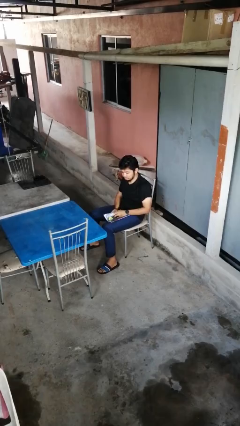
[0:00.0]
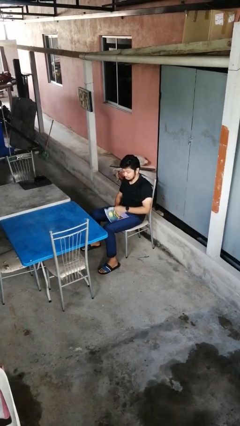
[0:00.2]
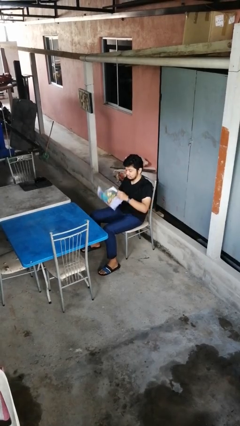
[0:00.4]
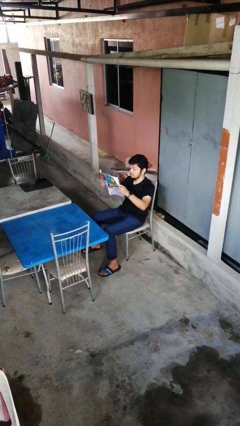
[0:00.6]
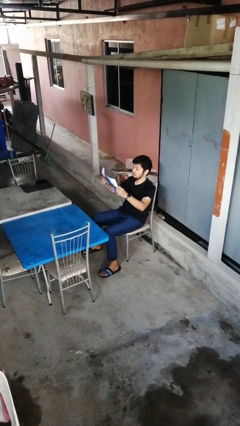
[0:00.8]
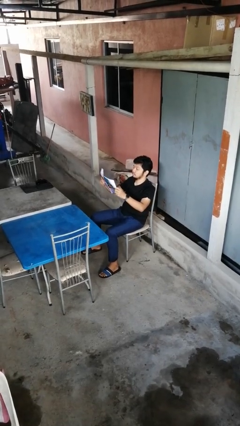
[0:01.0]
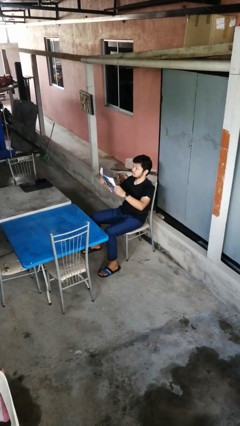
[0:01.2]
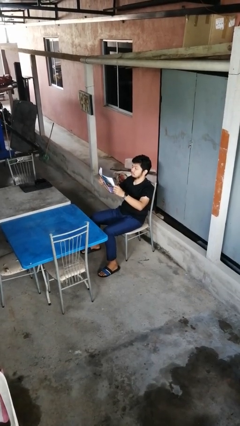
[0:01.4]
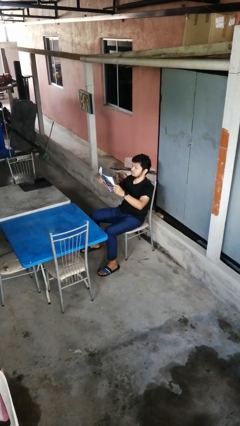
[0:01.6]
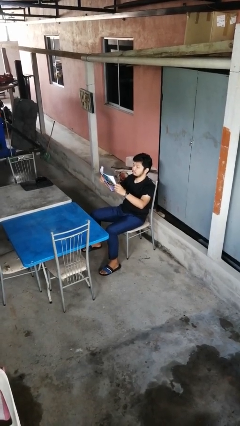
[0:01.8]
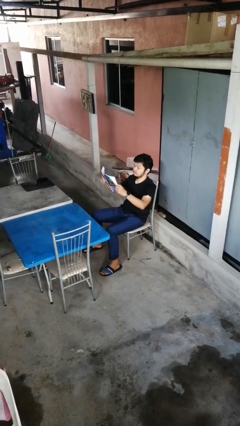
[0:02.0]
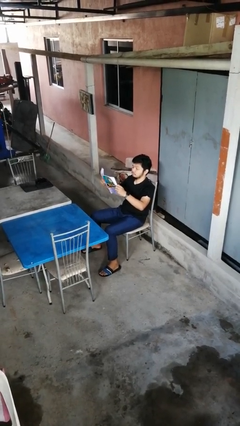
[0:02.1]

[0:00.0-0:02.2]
person reads magazine

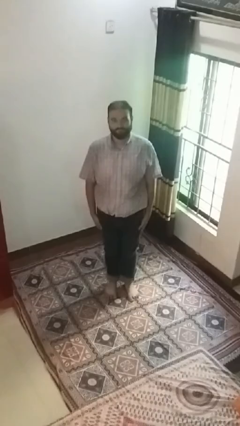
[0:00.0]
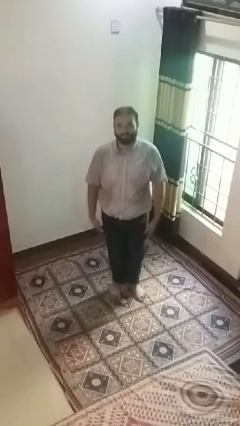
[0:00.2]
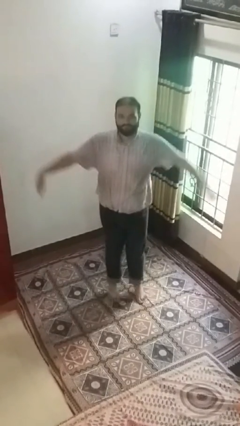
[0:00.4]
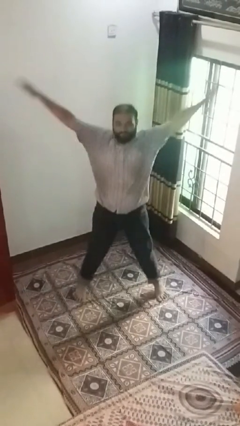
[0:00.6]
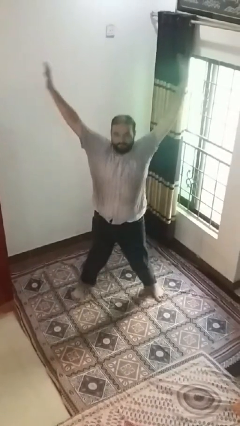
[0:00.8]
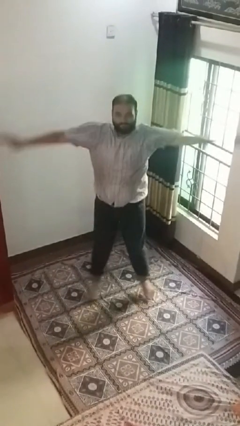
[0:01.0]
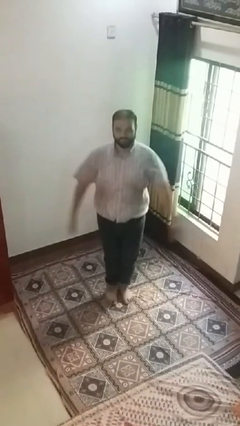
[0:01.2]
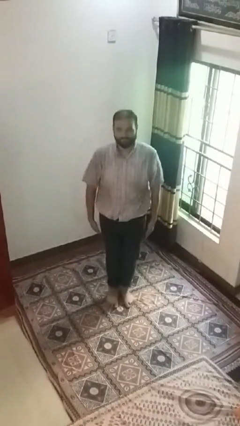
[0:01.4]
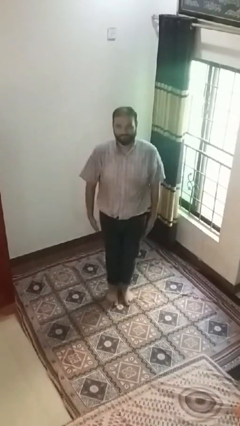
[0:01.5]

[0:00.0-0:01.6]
person exercises with jumping jacks

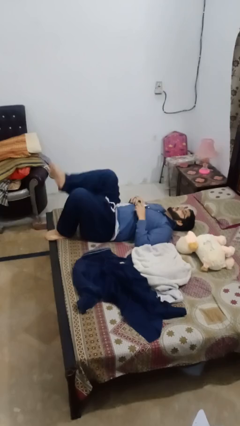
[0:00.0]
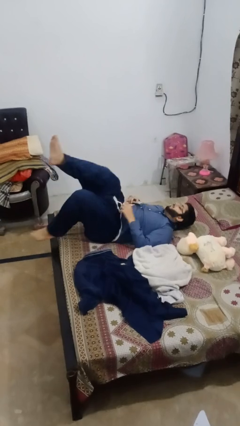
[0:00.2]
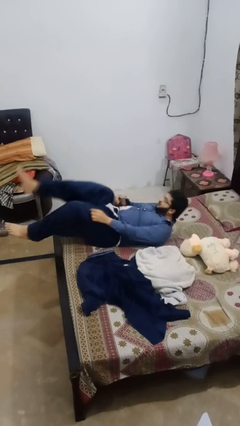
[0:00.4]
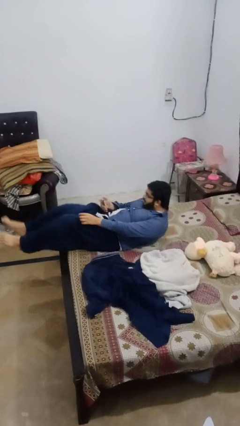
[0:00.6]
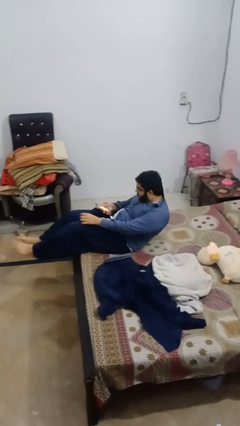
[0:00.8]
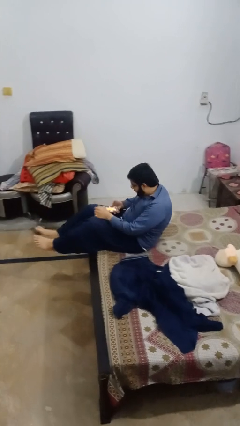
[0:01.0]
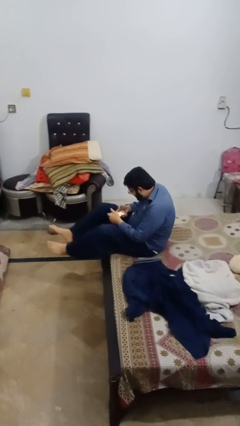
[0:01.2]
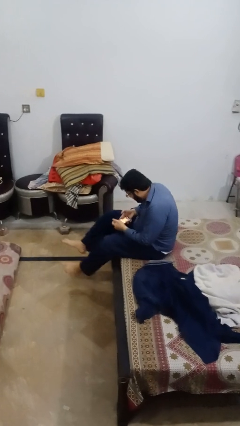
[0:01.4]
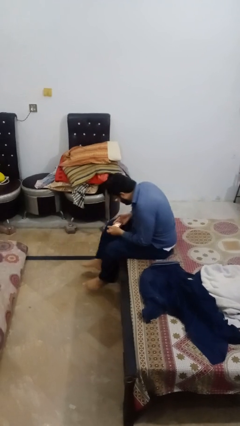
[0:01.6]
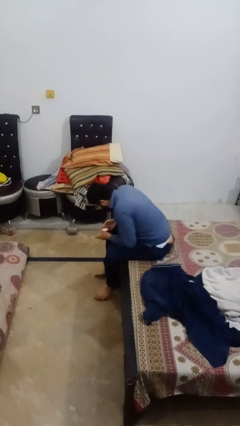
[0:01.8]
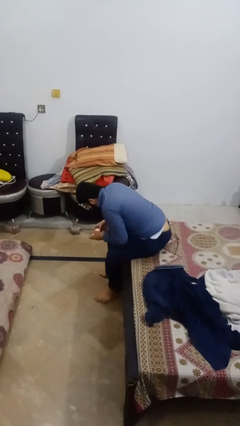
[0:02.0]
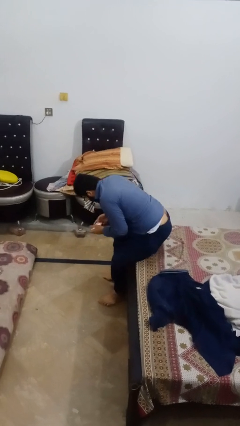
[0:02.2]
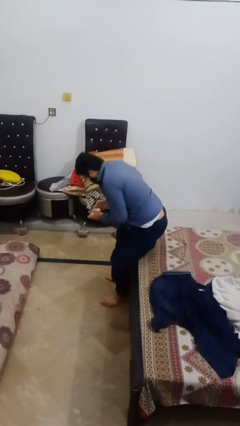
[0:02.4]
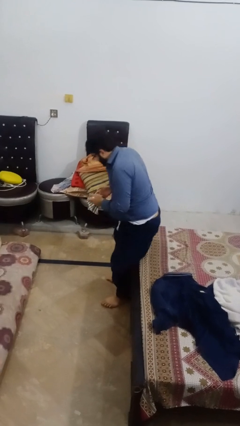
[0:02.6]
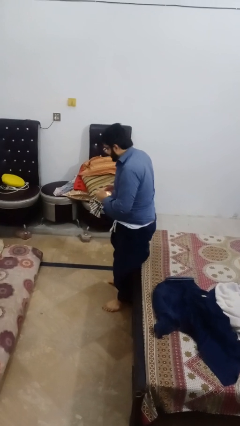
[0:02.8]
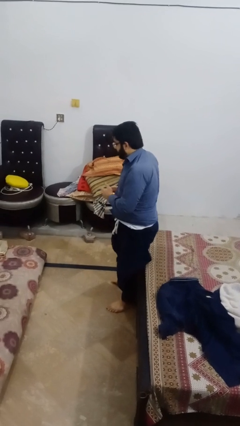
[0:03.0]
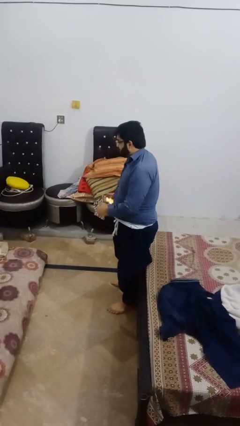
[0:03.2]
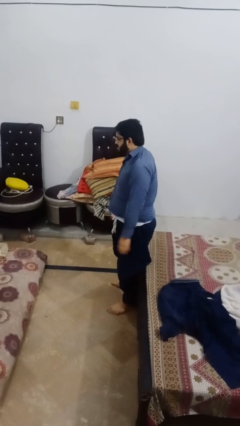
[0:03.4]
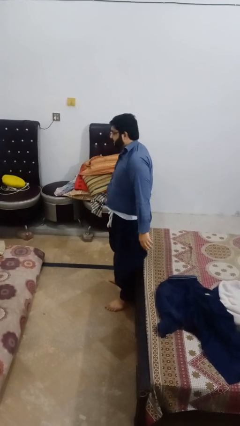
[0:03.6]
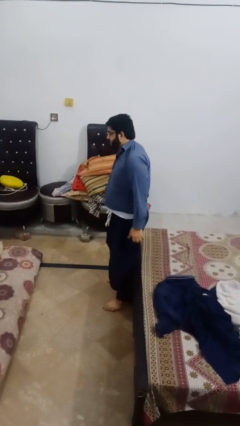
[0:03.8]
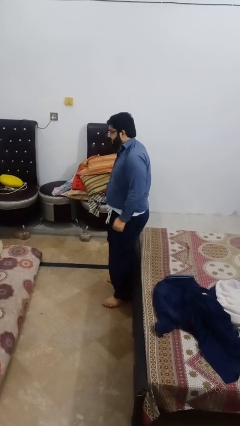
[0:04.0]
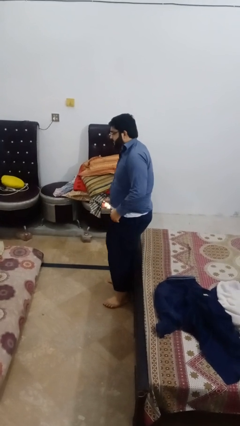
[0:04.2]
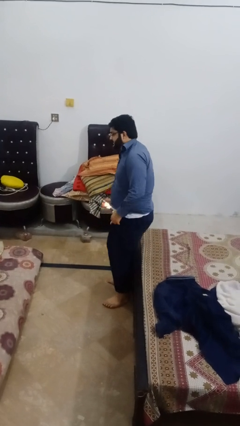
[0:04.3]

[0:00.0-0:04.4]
person stands up

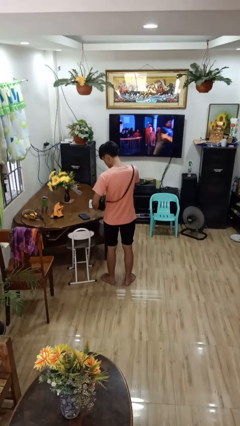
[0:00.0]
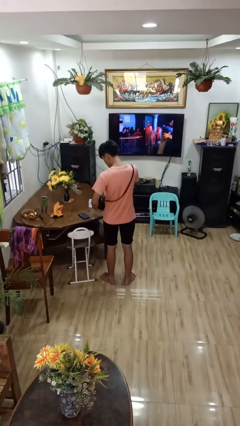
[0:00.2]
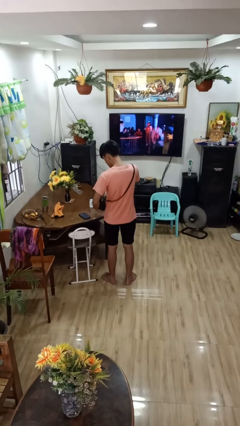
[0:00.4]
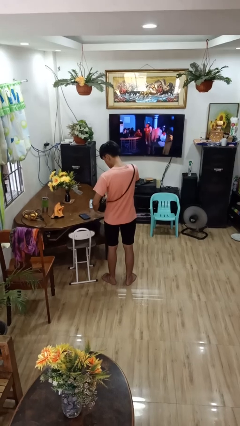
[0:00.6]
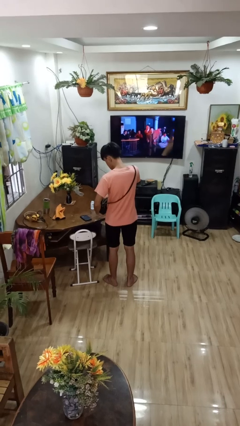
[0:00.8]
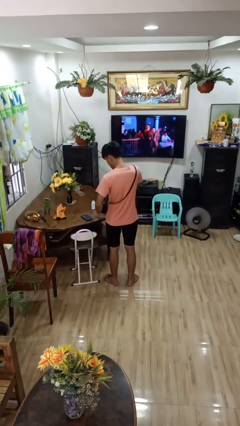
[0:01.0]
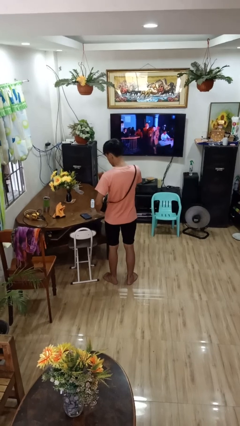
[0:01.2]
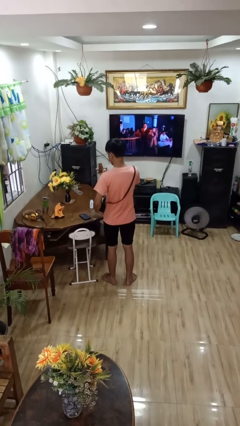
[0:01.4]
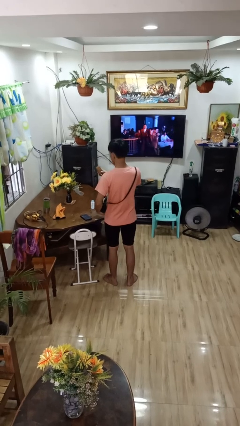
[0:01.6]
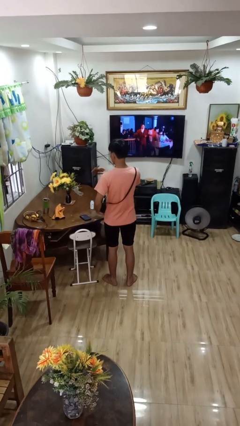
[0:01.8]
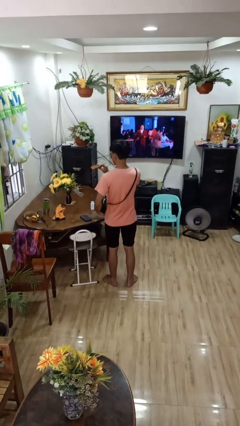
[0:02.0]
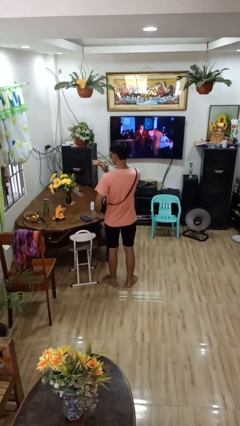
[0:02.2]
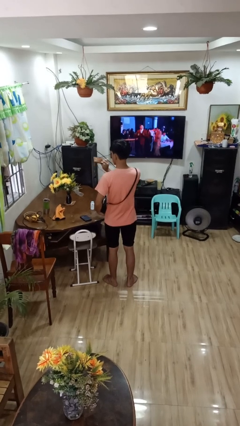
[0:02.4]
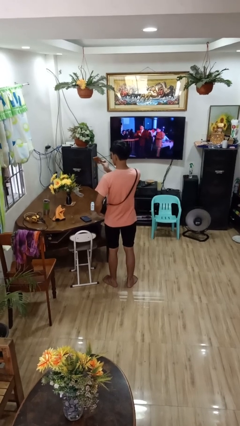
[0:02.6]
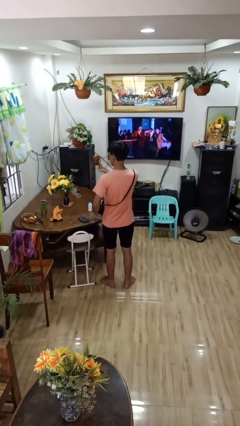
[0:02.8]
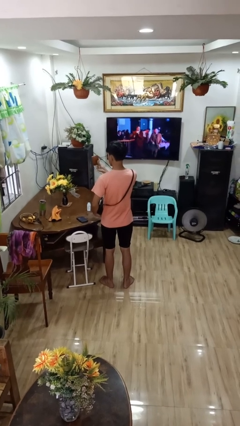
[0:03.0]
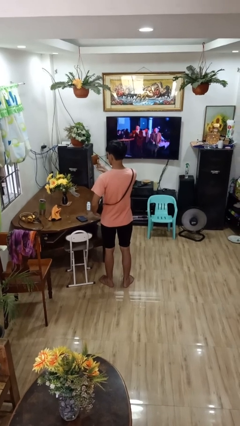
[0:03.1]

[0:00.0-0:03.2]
person takes object from purse

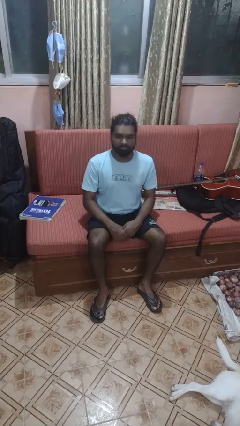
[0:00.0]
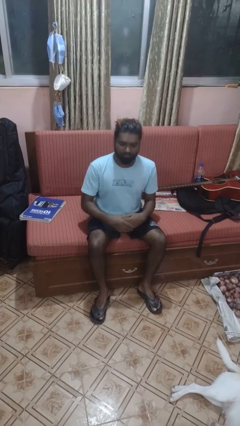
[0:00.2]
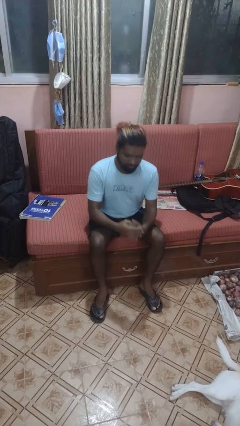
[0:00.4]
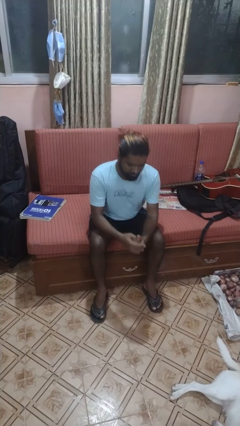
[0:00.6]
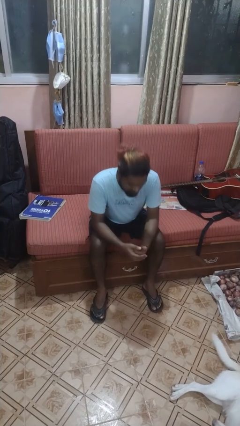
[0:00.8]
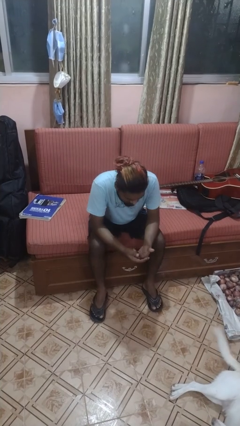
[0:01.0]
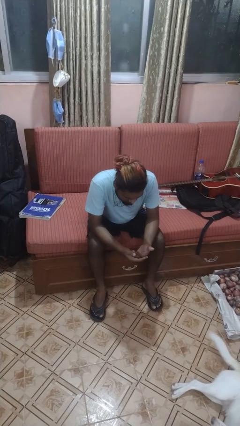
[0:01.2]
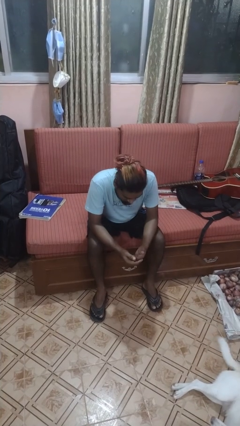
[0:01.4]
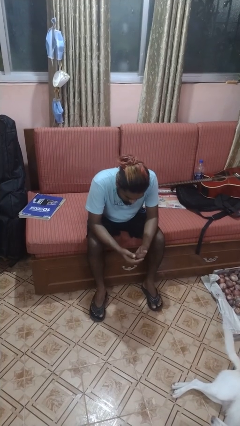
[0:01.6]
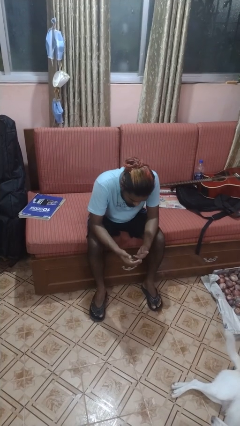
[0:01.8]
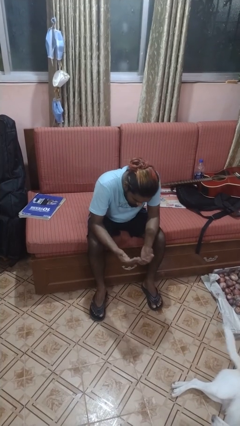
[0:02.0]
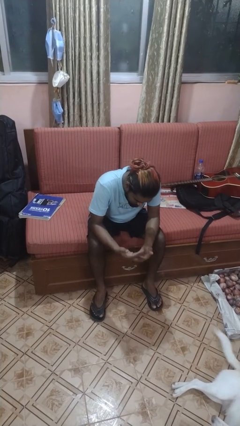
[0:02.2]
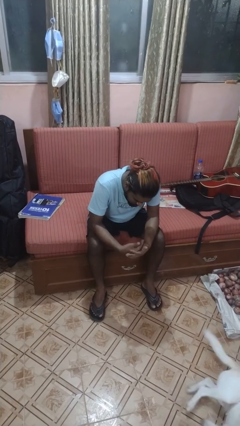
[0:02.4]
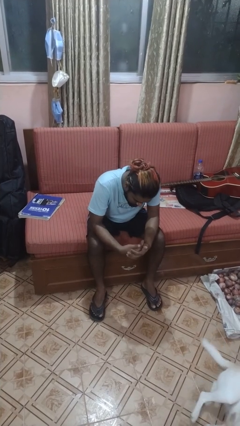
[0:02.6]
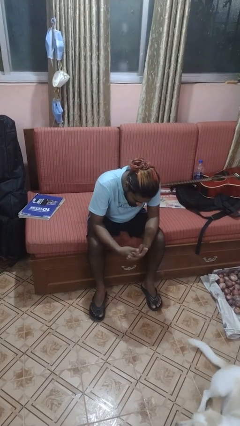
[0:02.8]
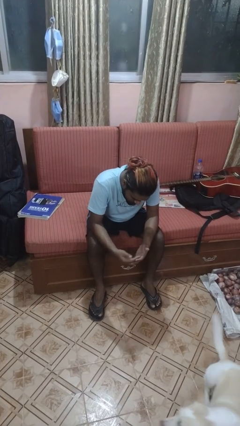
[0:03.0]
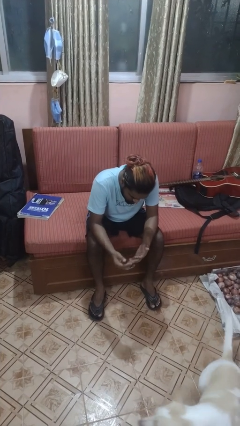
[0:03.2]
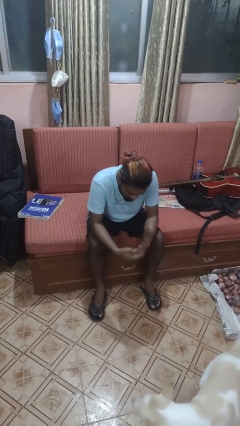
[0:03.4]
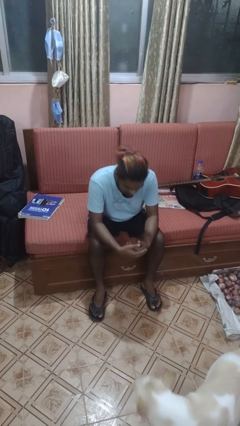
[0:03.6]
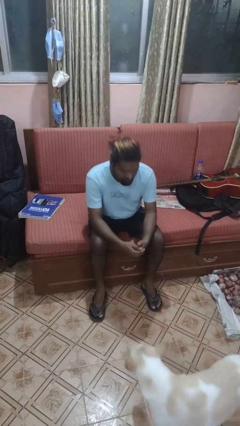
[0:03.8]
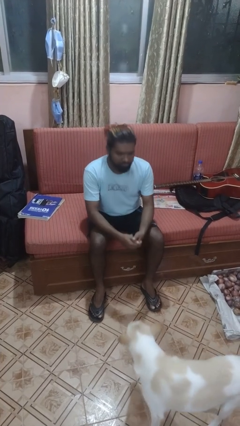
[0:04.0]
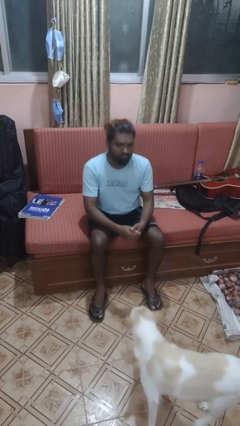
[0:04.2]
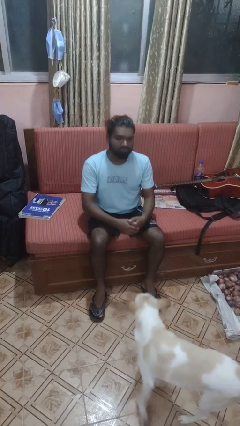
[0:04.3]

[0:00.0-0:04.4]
person looks at hands in lap

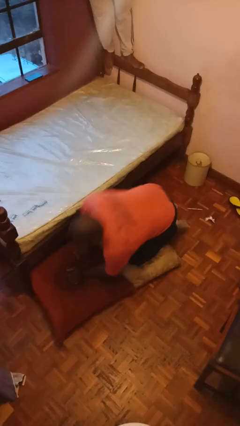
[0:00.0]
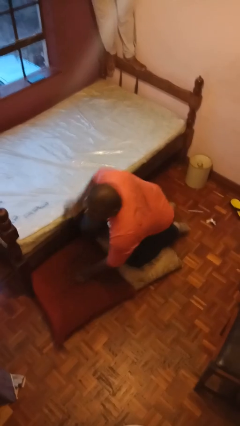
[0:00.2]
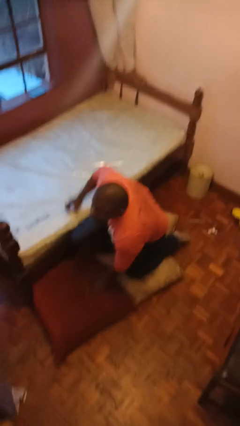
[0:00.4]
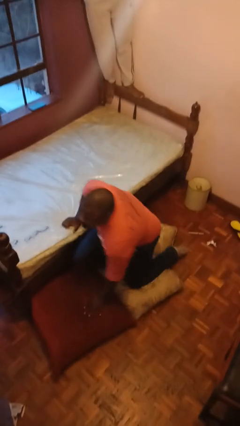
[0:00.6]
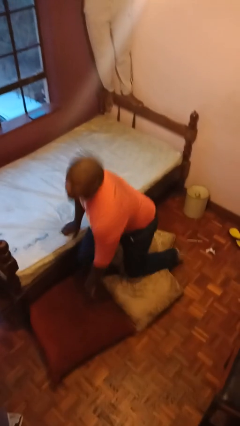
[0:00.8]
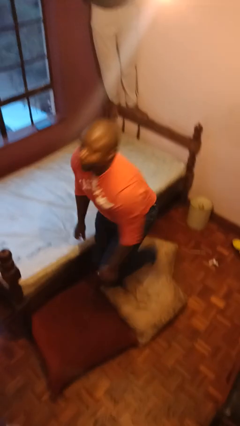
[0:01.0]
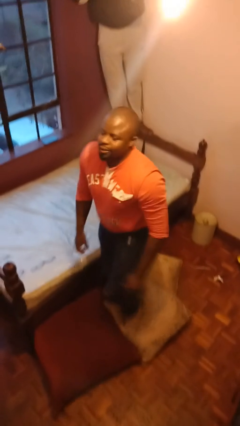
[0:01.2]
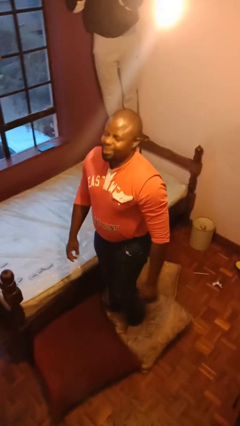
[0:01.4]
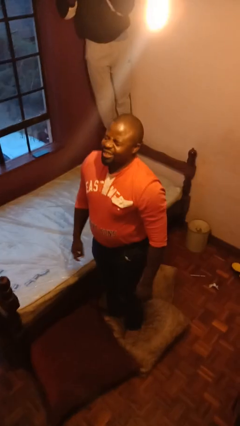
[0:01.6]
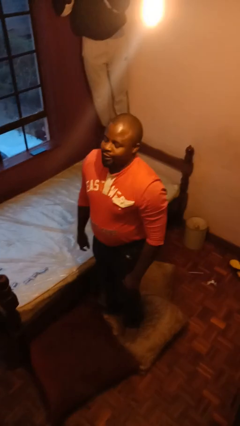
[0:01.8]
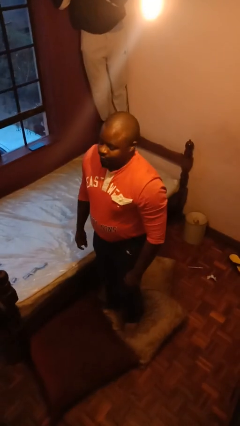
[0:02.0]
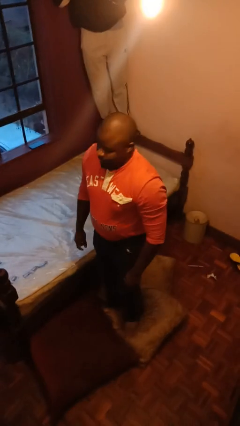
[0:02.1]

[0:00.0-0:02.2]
person stands up from floor
